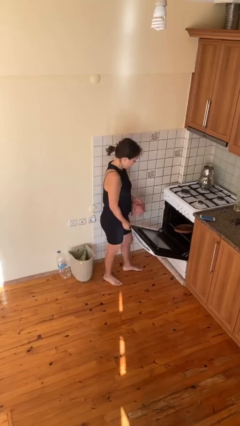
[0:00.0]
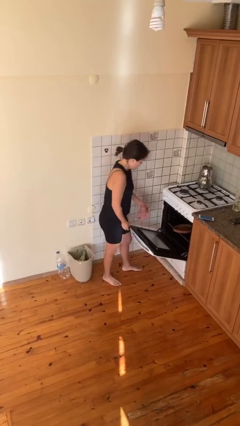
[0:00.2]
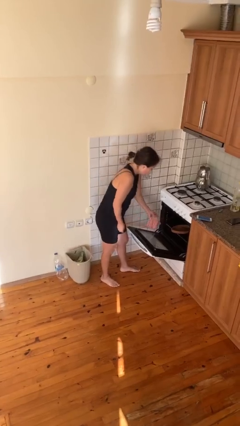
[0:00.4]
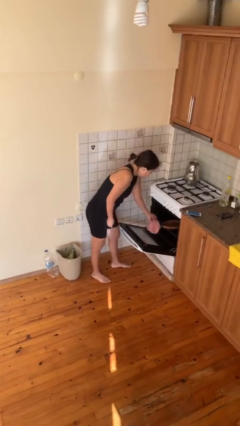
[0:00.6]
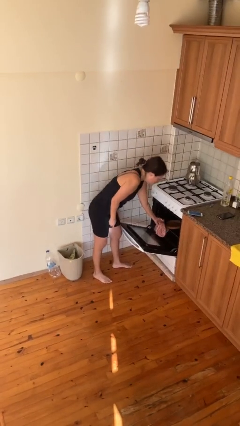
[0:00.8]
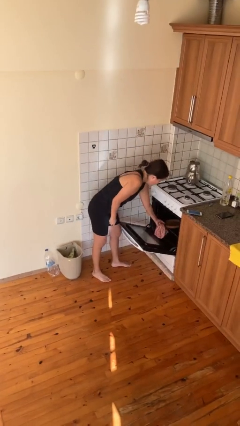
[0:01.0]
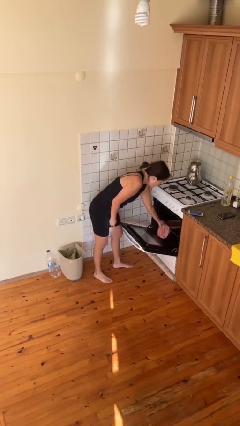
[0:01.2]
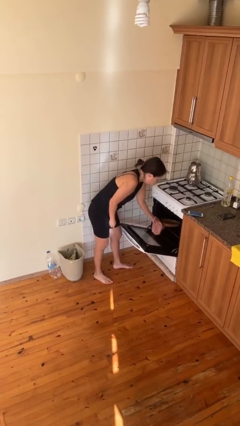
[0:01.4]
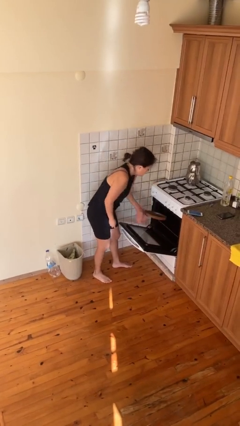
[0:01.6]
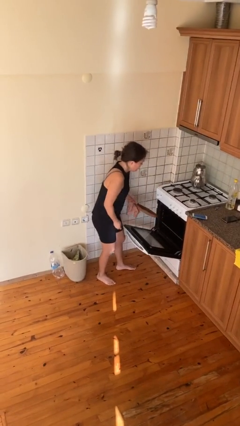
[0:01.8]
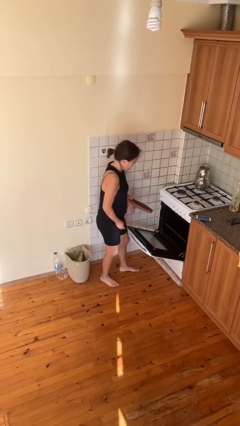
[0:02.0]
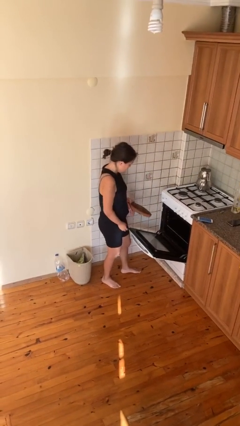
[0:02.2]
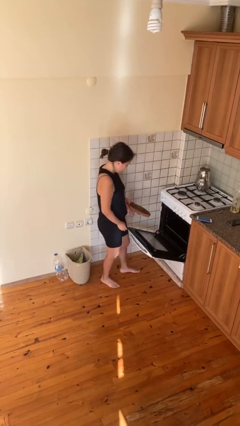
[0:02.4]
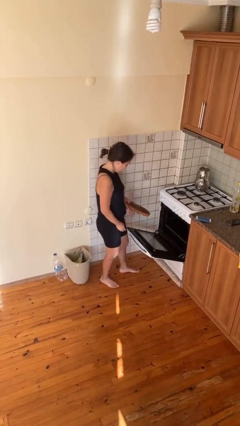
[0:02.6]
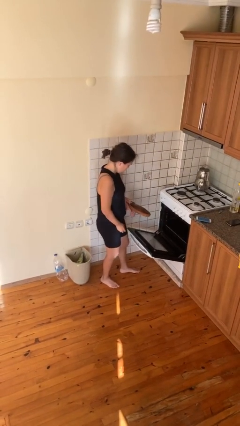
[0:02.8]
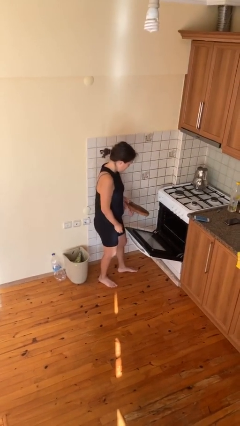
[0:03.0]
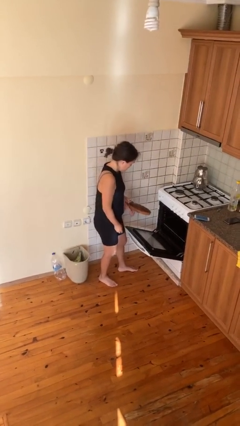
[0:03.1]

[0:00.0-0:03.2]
person takes object from oven

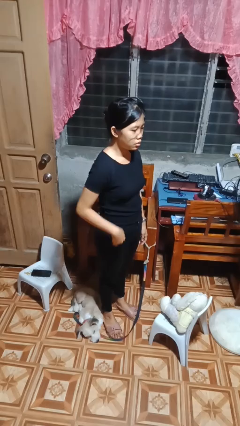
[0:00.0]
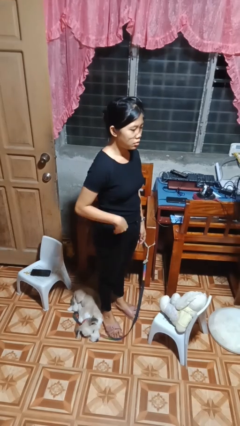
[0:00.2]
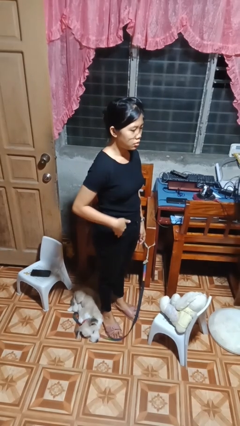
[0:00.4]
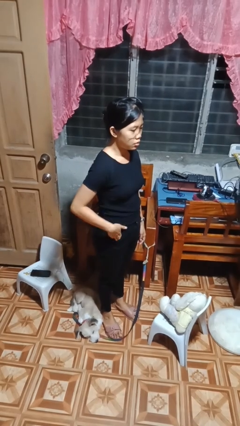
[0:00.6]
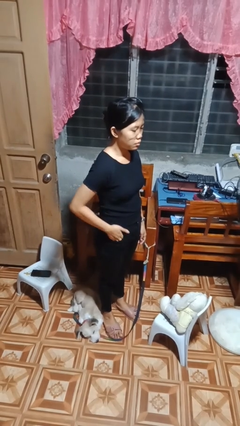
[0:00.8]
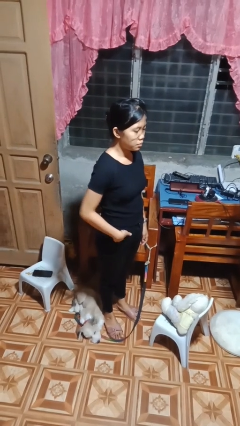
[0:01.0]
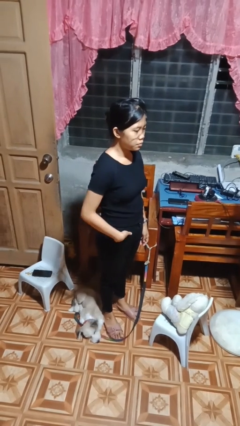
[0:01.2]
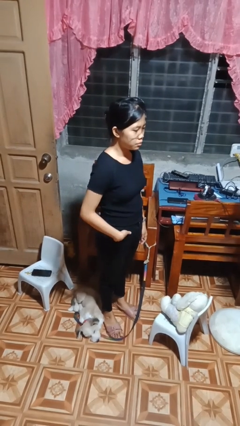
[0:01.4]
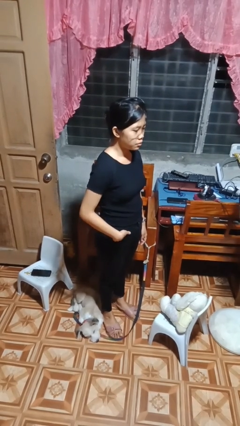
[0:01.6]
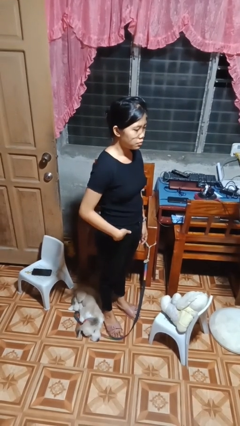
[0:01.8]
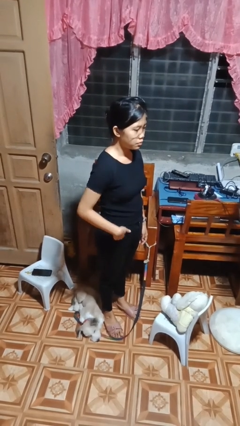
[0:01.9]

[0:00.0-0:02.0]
person puts hands in back pockets

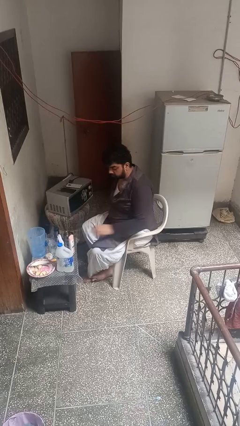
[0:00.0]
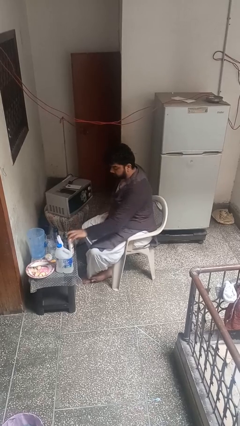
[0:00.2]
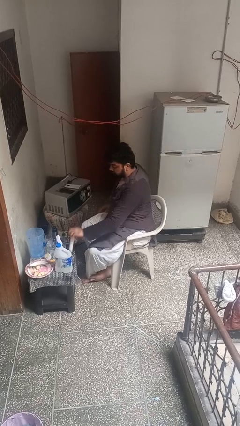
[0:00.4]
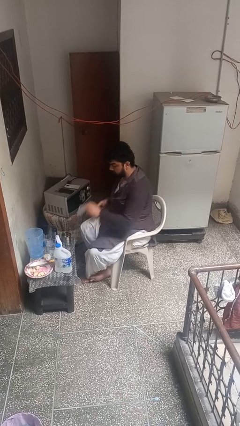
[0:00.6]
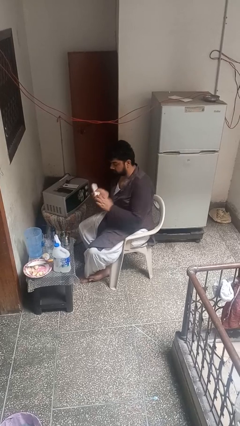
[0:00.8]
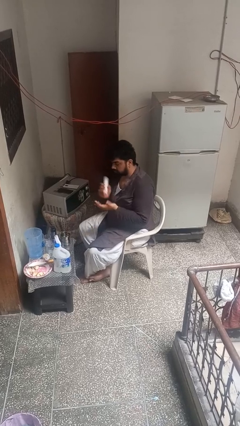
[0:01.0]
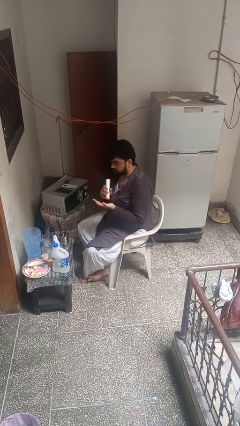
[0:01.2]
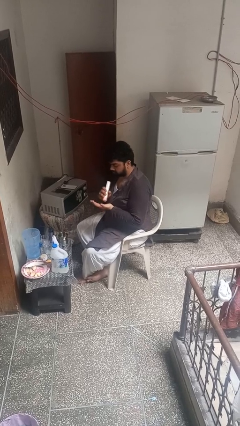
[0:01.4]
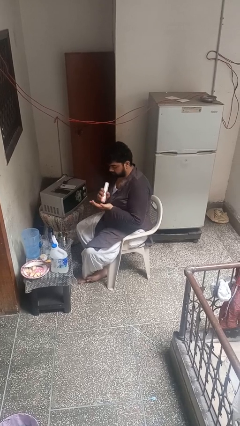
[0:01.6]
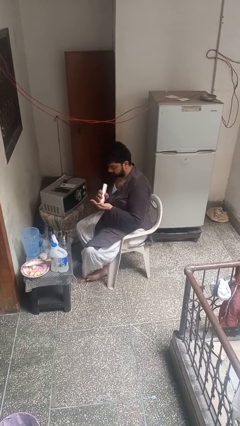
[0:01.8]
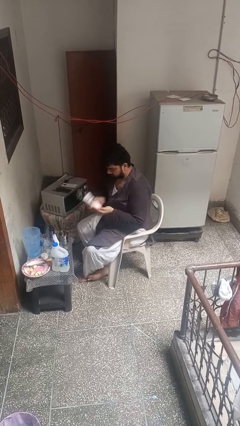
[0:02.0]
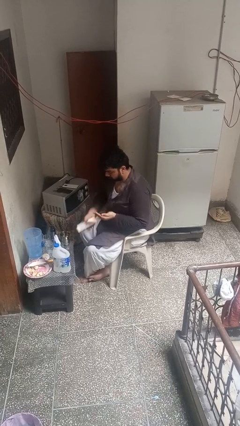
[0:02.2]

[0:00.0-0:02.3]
person applies facial moisturizer

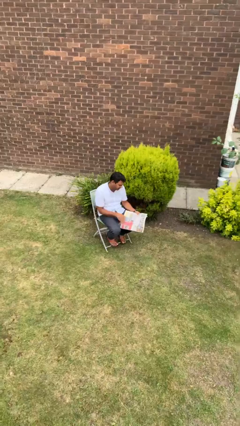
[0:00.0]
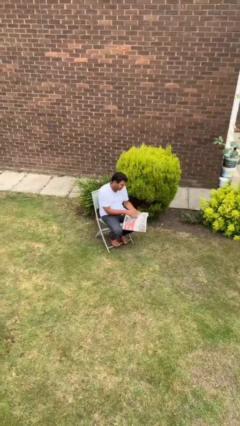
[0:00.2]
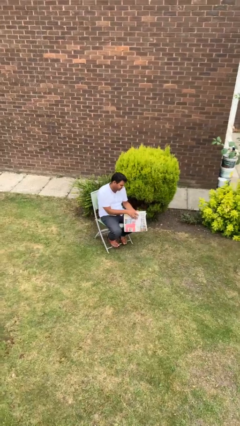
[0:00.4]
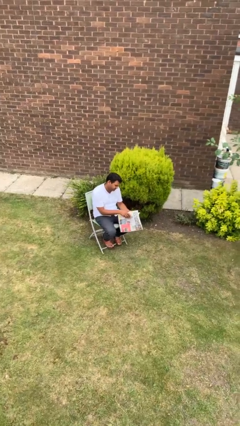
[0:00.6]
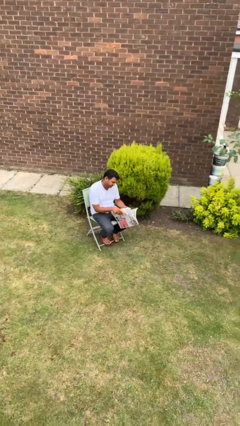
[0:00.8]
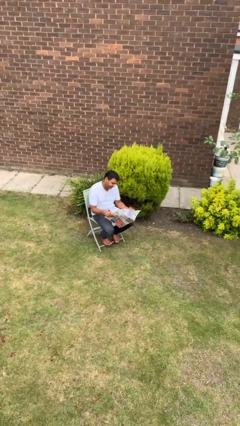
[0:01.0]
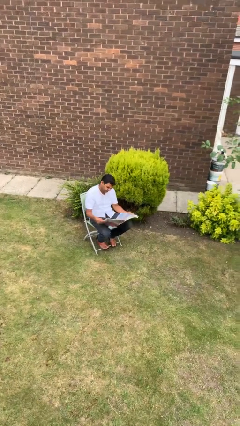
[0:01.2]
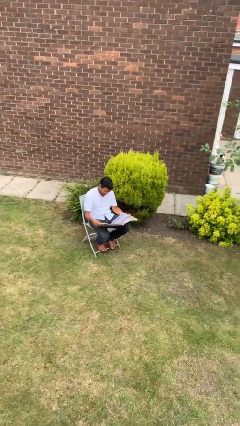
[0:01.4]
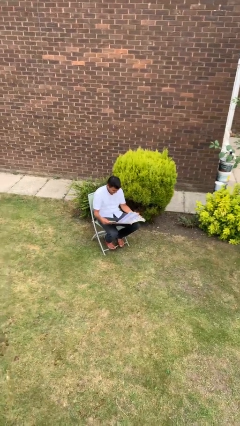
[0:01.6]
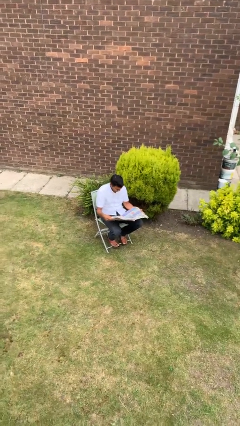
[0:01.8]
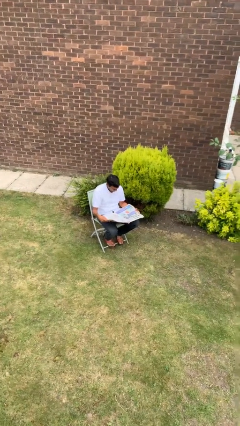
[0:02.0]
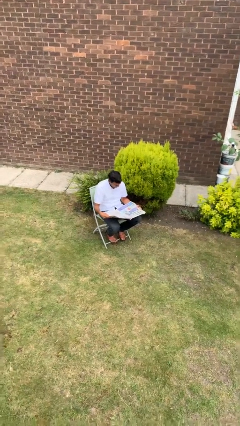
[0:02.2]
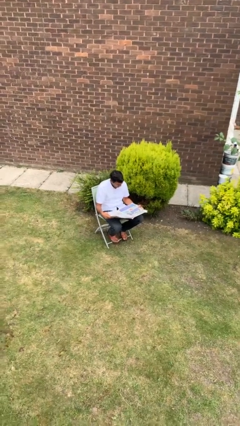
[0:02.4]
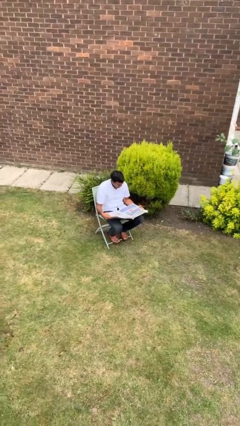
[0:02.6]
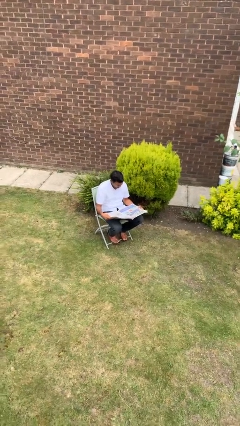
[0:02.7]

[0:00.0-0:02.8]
person reads newspaper

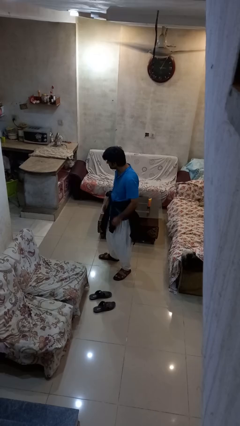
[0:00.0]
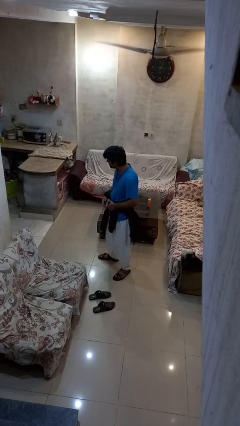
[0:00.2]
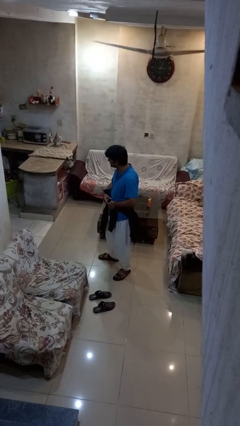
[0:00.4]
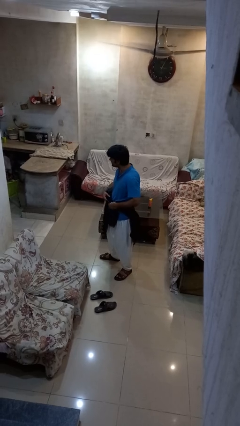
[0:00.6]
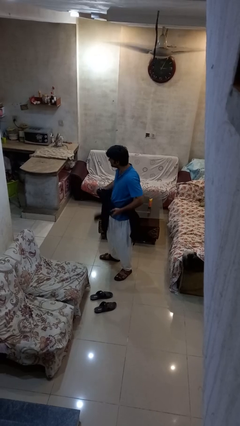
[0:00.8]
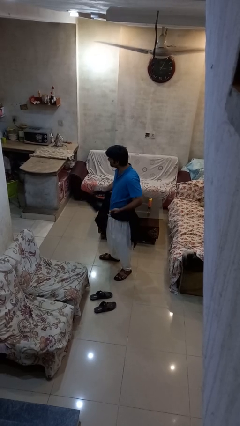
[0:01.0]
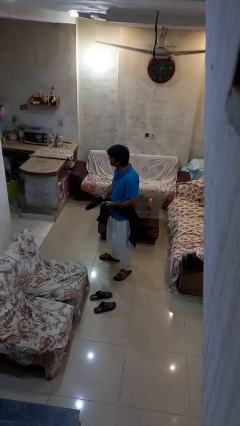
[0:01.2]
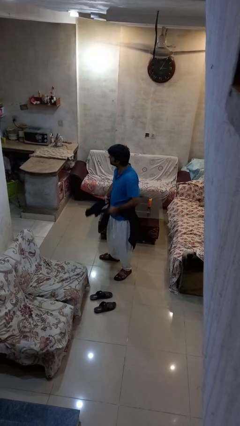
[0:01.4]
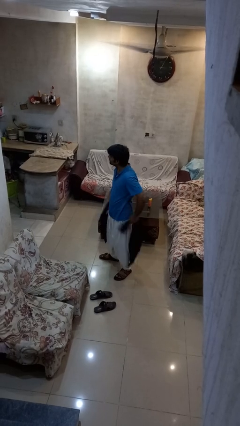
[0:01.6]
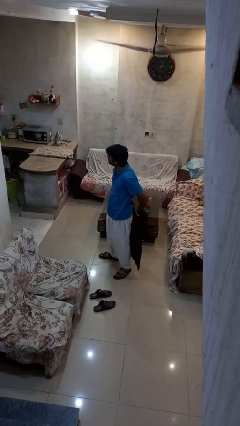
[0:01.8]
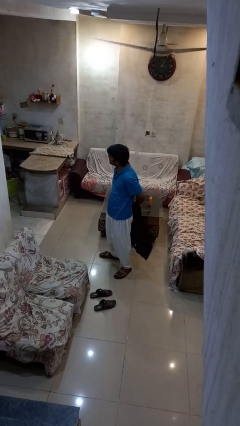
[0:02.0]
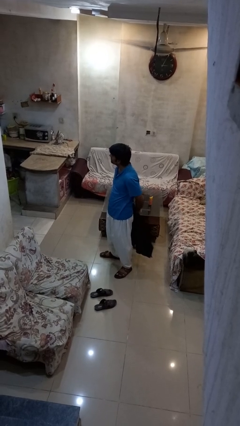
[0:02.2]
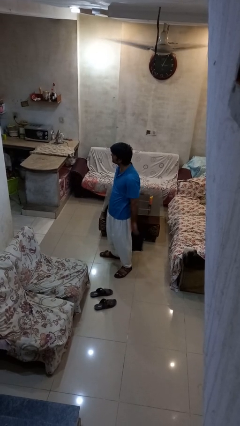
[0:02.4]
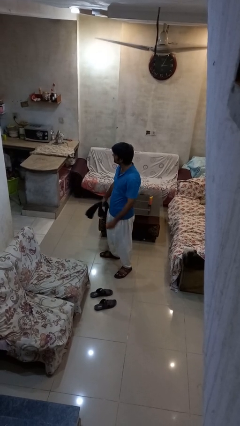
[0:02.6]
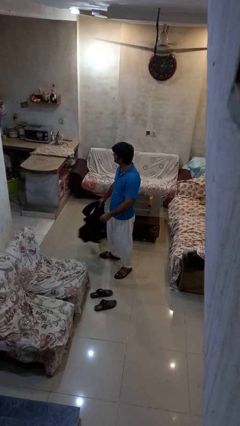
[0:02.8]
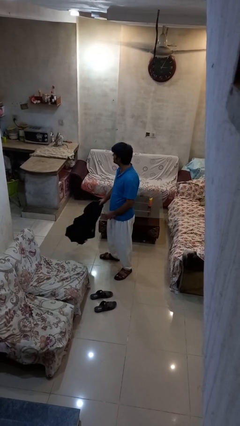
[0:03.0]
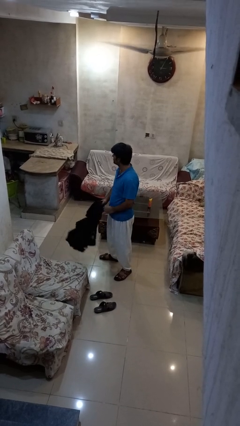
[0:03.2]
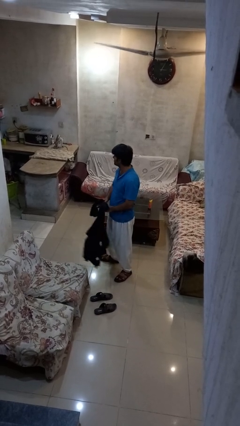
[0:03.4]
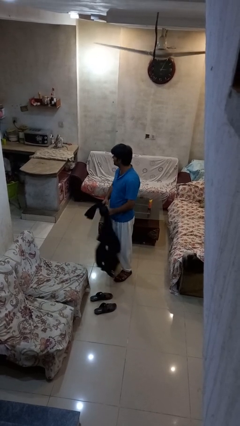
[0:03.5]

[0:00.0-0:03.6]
person unties jacket around waist

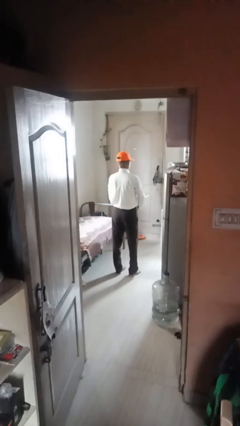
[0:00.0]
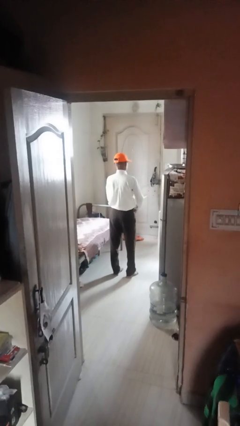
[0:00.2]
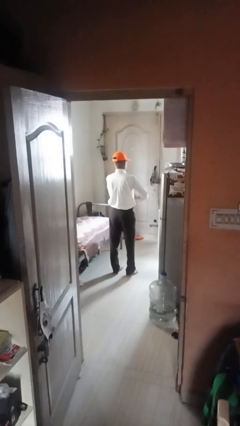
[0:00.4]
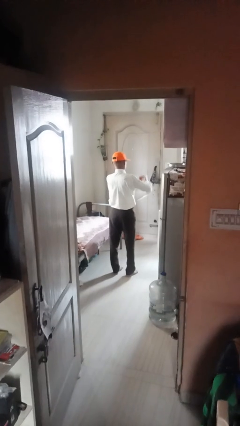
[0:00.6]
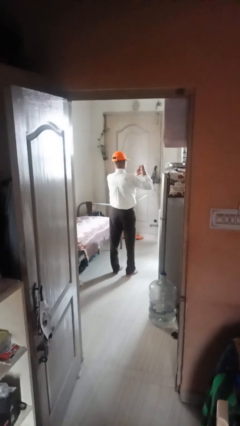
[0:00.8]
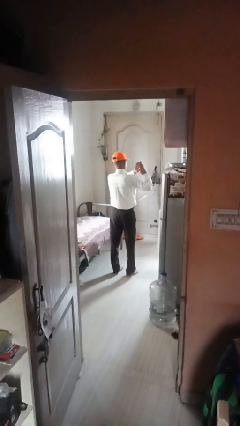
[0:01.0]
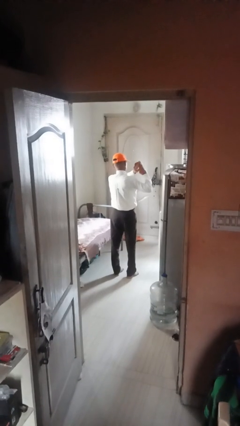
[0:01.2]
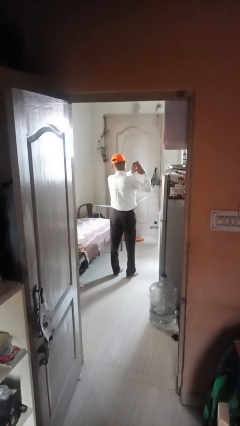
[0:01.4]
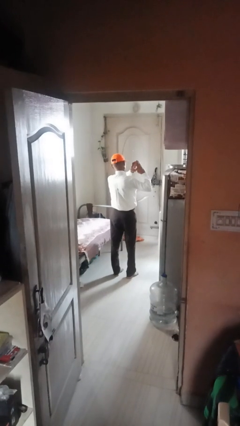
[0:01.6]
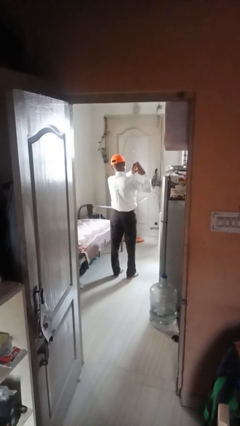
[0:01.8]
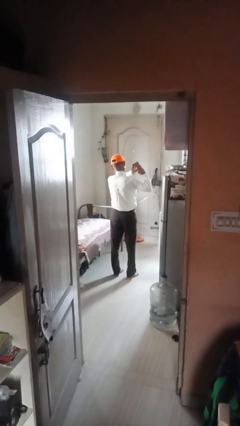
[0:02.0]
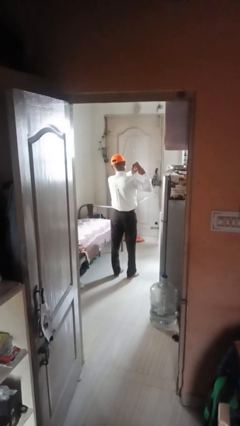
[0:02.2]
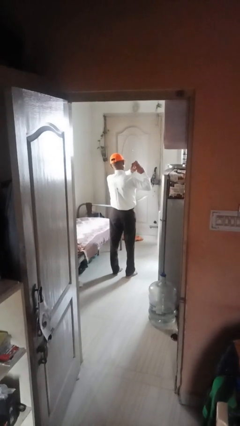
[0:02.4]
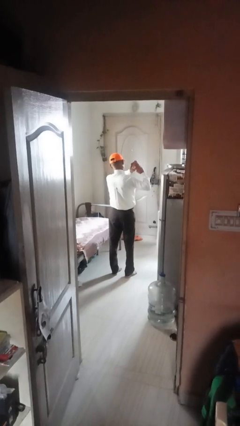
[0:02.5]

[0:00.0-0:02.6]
person gestures heart

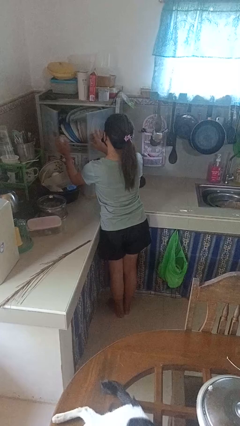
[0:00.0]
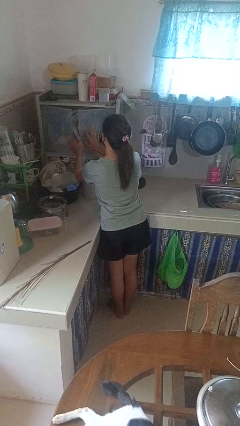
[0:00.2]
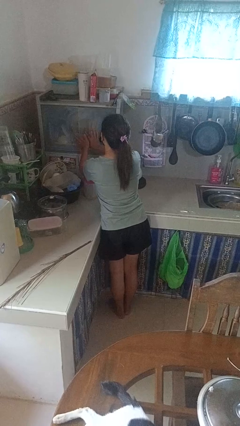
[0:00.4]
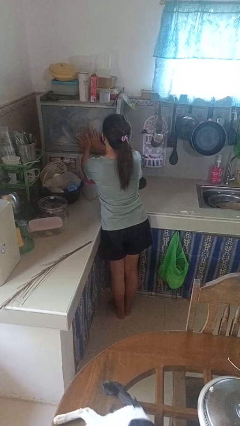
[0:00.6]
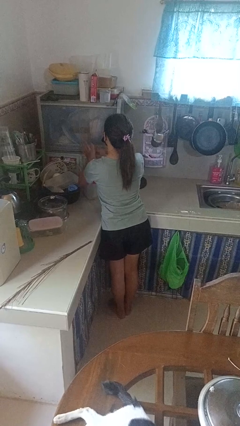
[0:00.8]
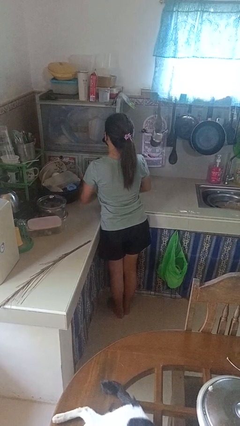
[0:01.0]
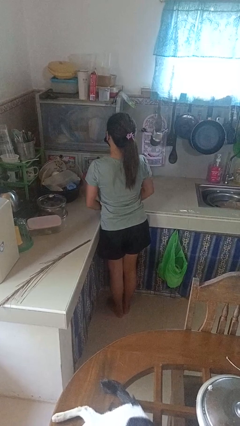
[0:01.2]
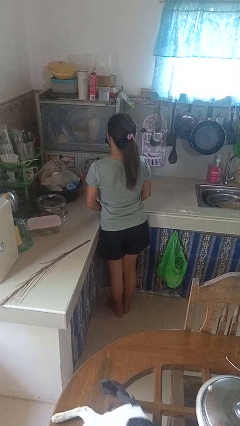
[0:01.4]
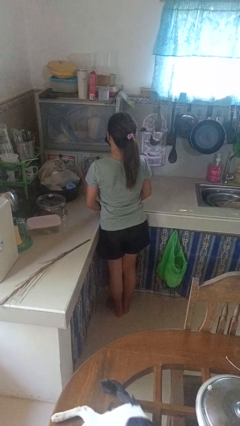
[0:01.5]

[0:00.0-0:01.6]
person closes kitchen drawer
